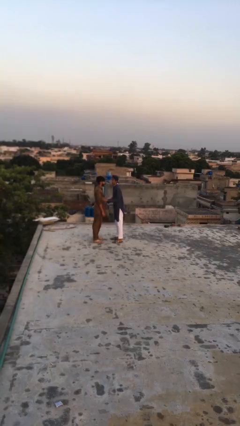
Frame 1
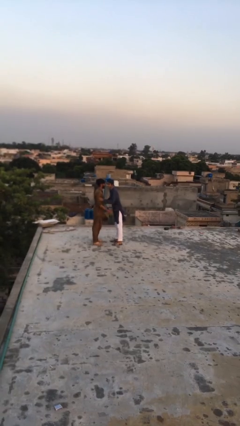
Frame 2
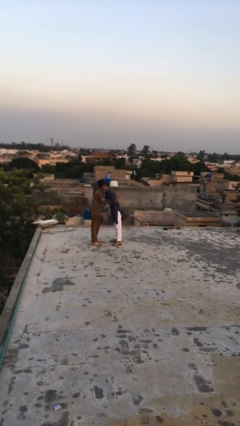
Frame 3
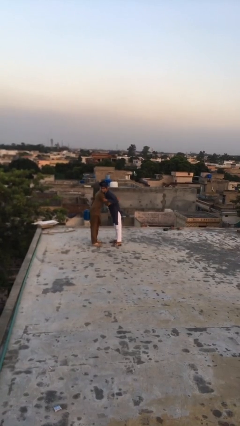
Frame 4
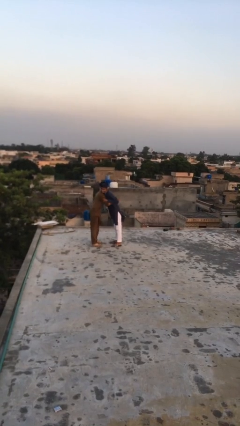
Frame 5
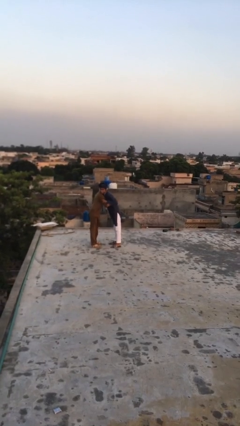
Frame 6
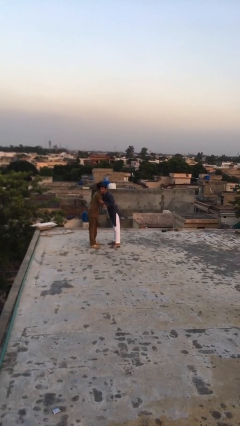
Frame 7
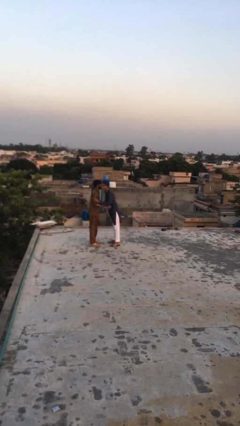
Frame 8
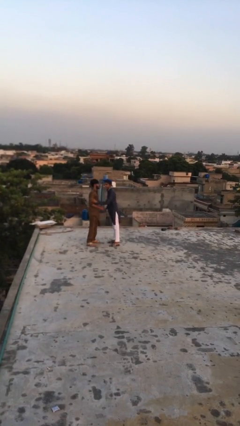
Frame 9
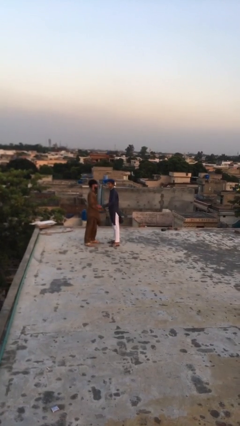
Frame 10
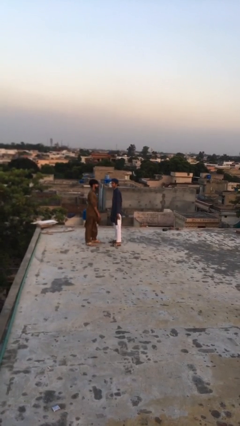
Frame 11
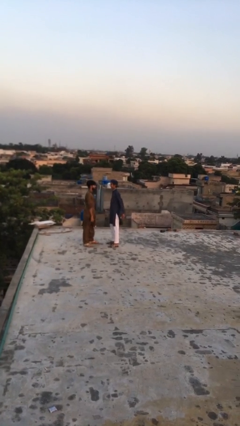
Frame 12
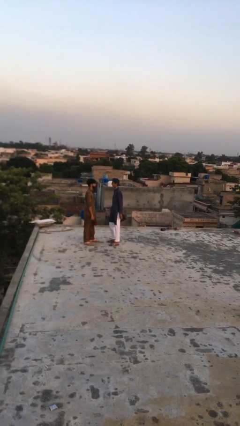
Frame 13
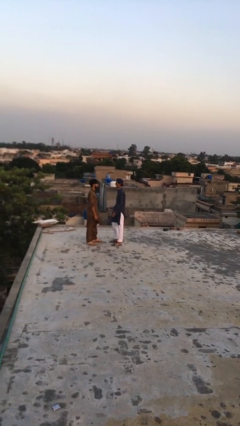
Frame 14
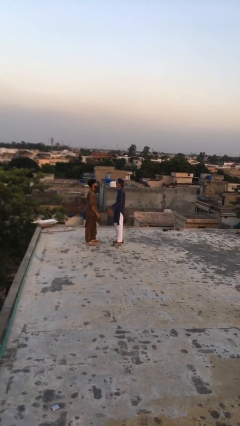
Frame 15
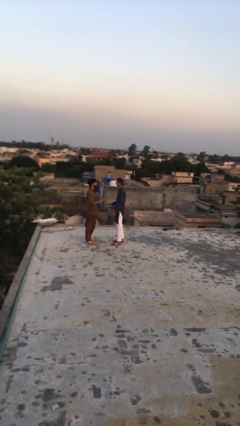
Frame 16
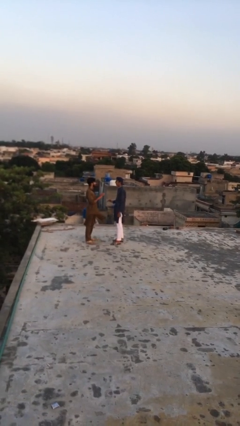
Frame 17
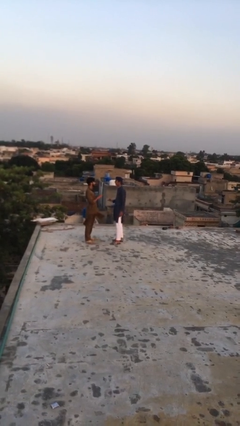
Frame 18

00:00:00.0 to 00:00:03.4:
person embraces person

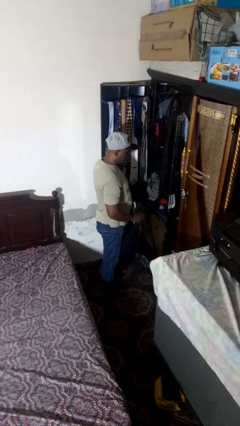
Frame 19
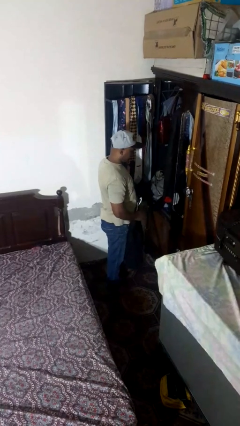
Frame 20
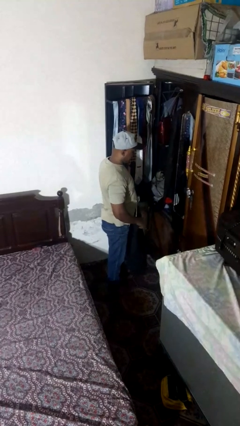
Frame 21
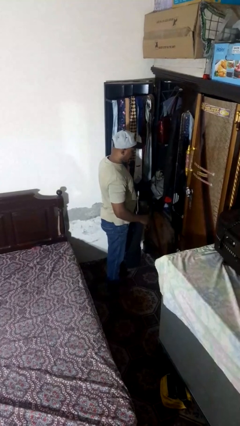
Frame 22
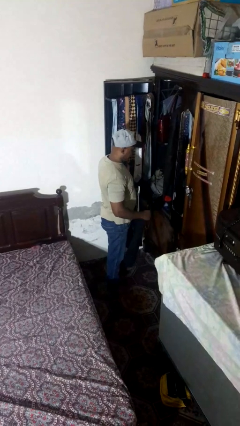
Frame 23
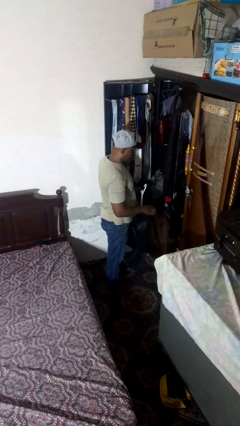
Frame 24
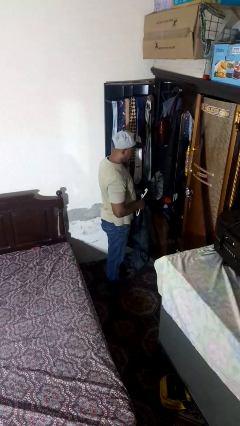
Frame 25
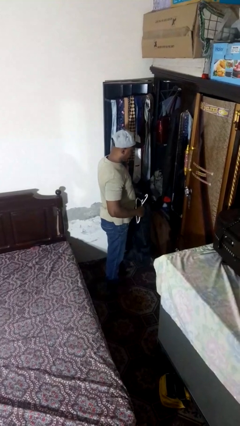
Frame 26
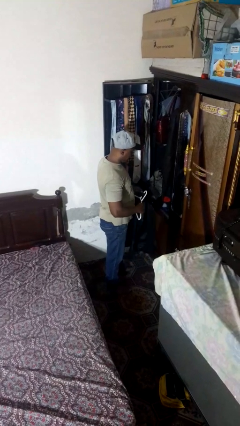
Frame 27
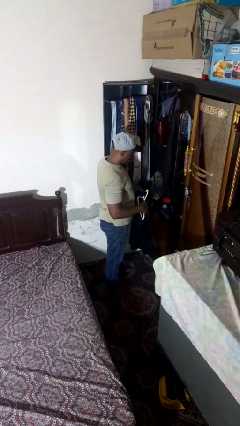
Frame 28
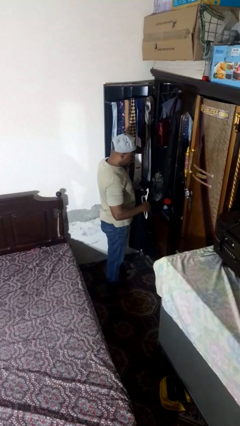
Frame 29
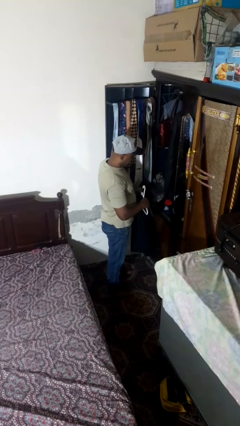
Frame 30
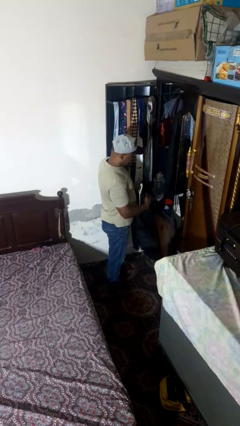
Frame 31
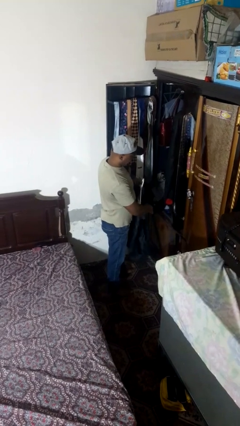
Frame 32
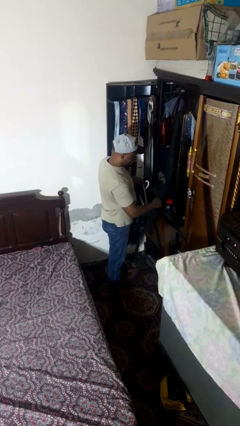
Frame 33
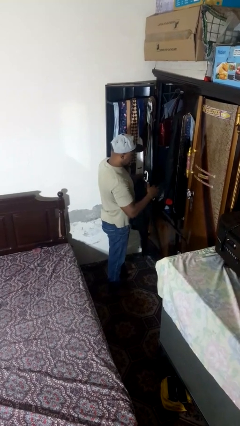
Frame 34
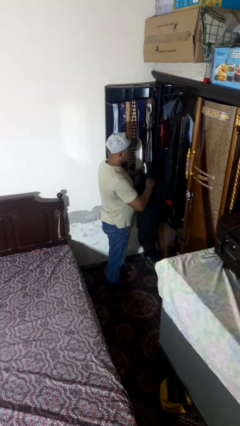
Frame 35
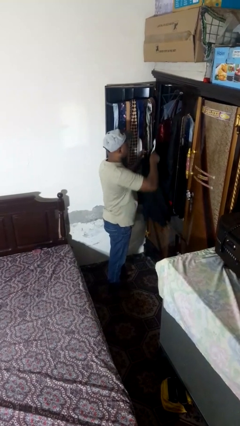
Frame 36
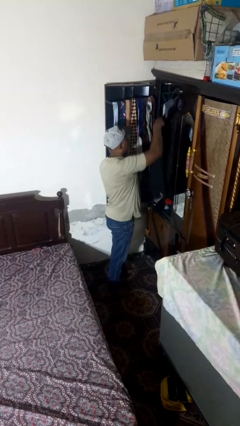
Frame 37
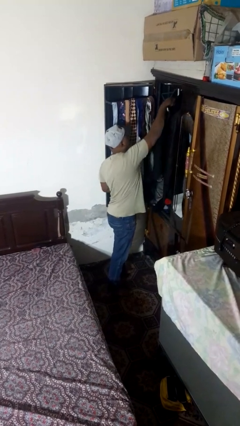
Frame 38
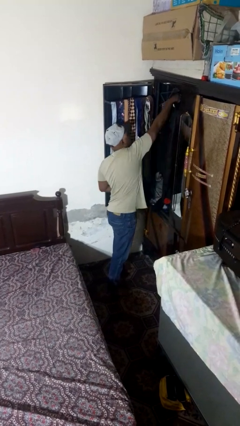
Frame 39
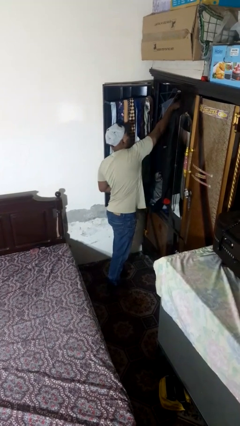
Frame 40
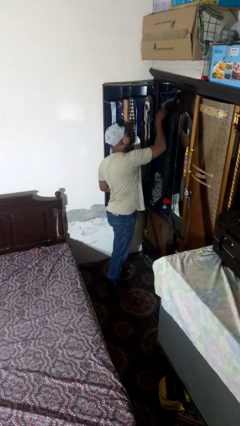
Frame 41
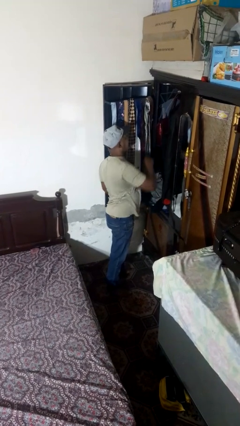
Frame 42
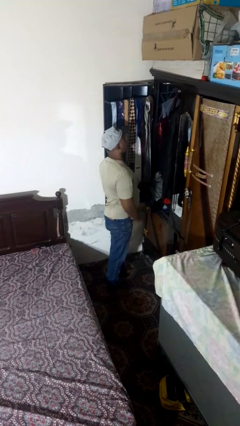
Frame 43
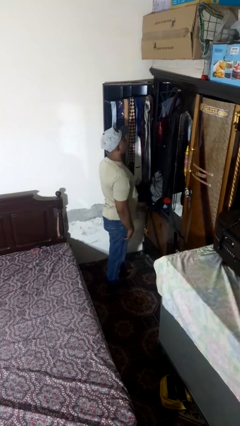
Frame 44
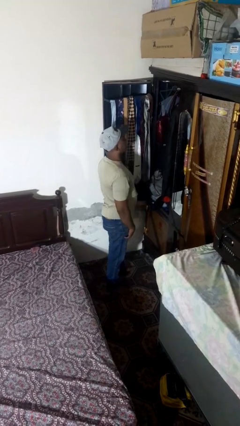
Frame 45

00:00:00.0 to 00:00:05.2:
person puts clothes into closet

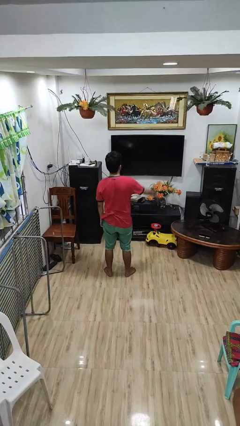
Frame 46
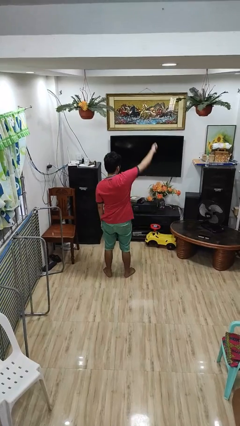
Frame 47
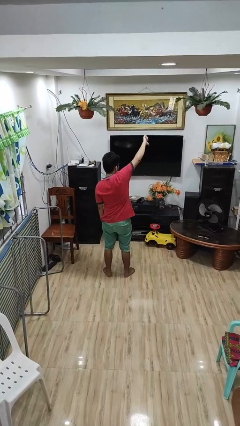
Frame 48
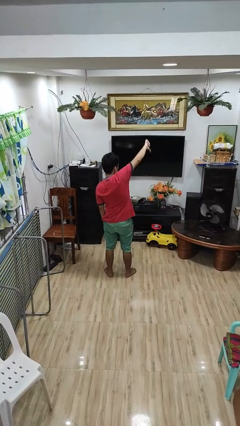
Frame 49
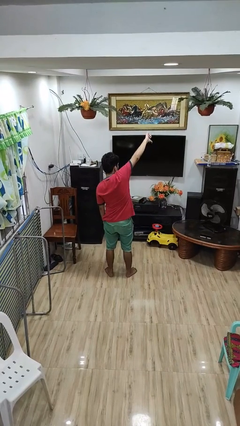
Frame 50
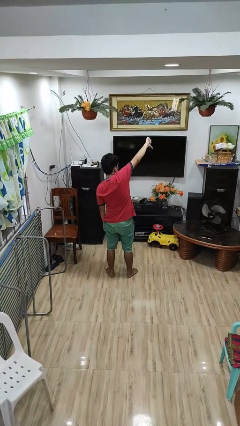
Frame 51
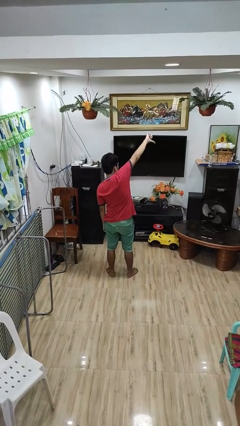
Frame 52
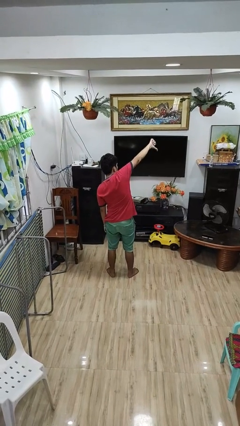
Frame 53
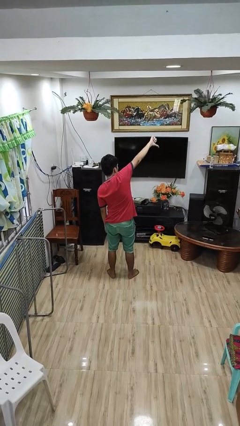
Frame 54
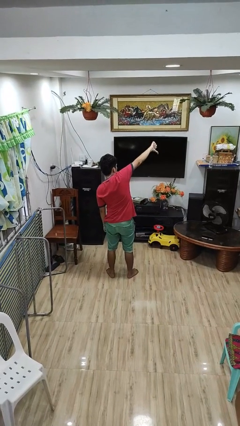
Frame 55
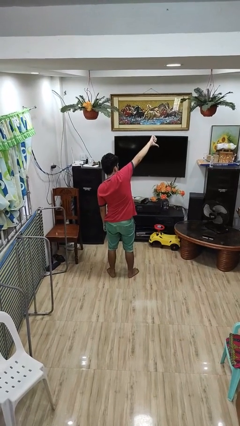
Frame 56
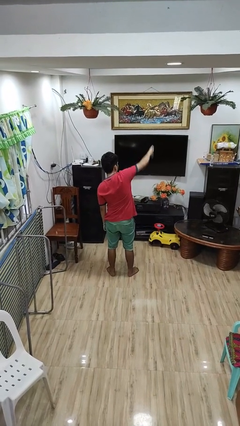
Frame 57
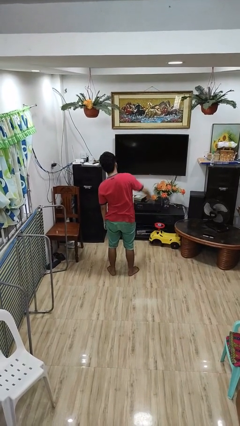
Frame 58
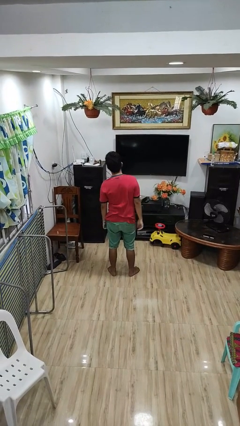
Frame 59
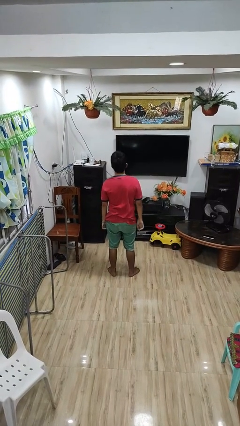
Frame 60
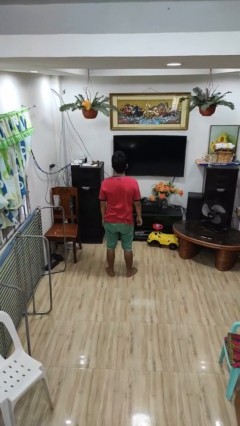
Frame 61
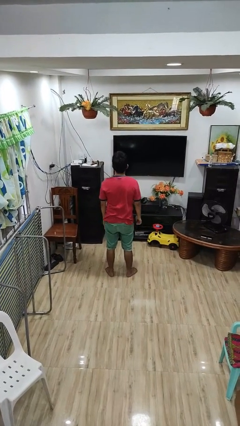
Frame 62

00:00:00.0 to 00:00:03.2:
person gestures thumbs down

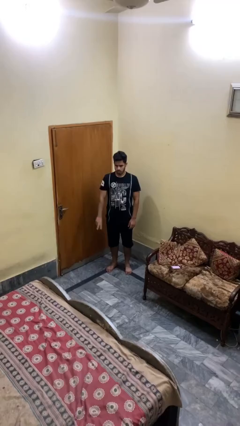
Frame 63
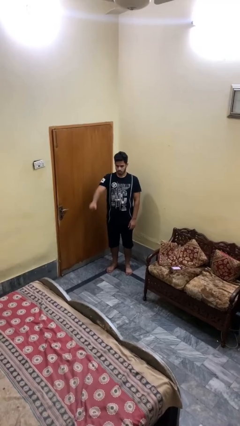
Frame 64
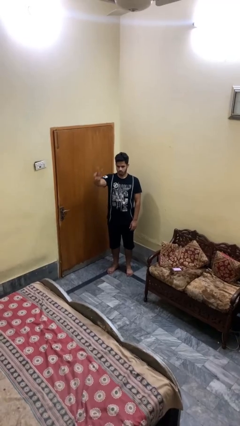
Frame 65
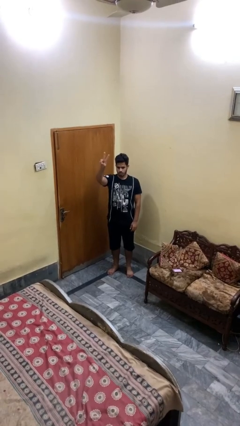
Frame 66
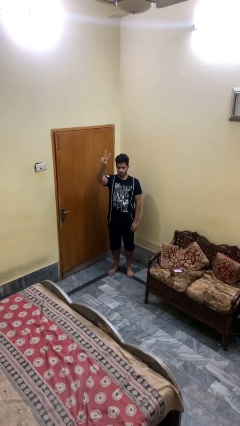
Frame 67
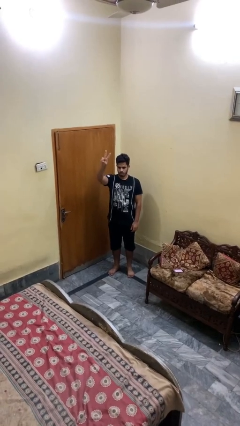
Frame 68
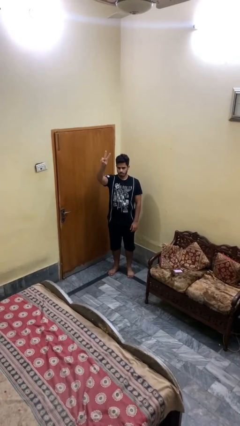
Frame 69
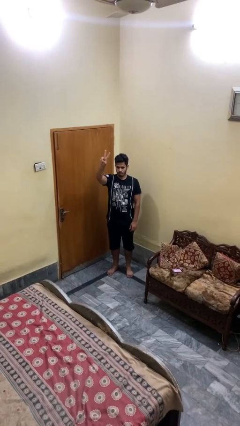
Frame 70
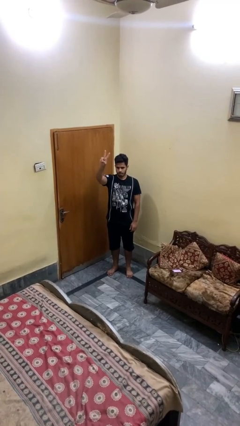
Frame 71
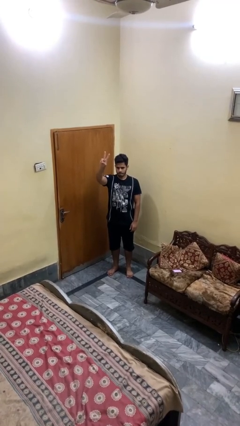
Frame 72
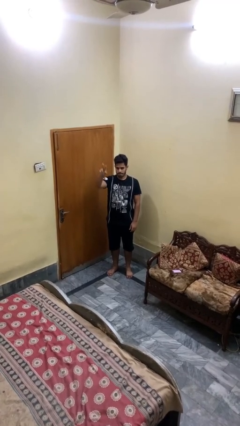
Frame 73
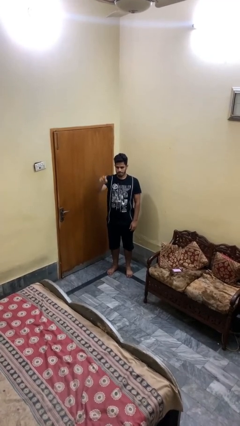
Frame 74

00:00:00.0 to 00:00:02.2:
person gestures peace

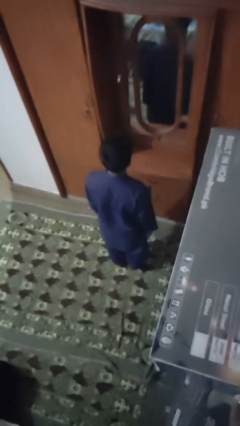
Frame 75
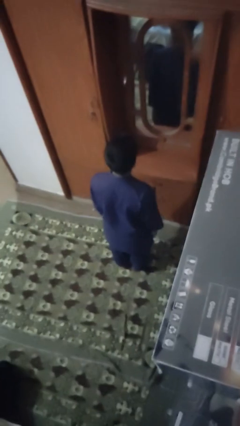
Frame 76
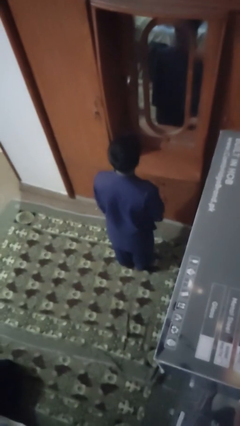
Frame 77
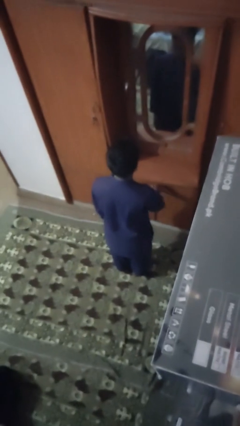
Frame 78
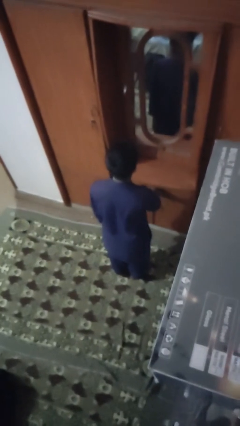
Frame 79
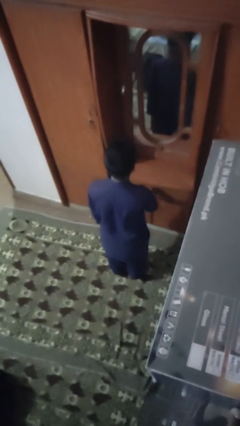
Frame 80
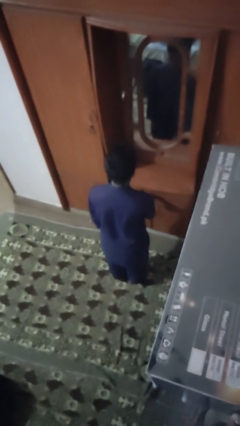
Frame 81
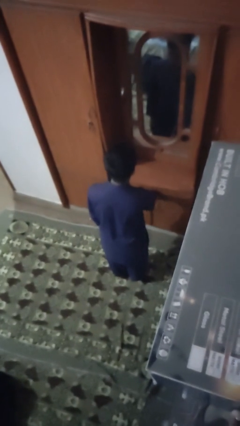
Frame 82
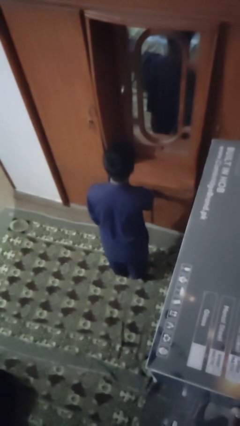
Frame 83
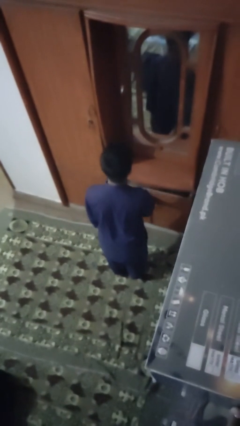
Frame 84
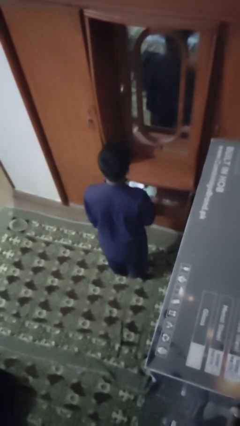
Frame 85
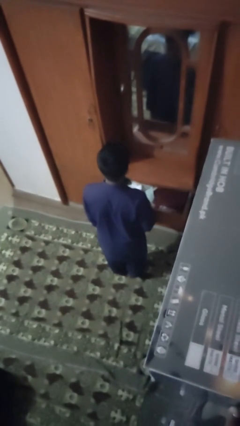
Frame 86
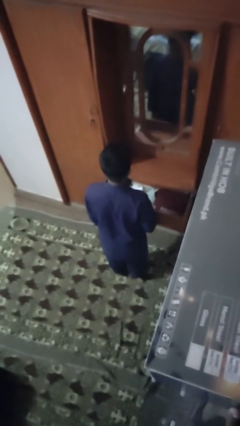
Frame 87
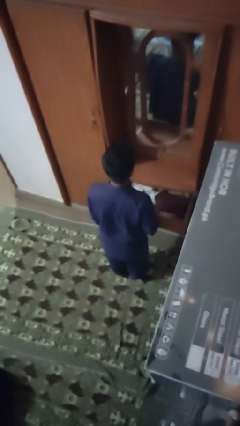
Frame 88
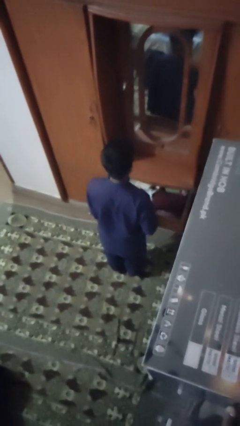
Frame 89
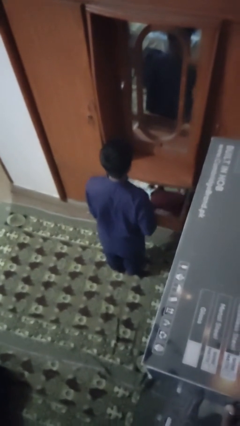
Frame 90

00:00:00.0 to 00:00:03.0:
person opens dresser drawer

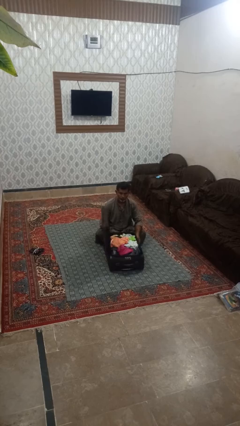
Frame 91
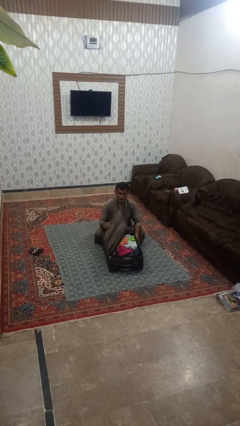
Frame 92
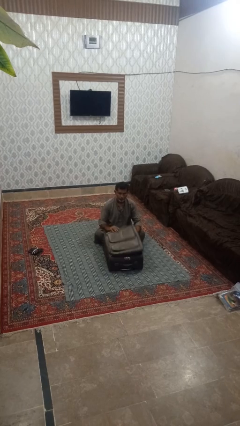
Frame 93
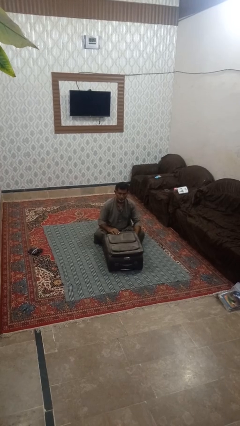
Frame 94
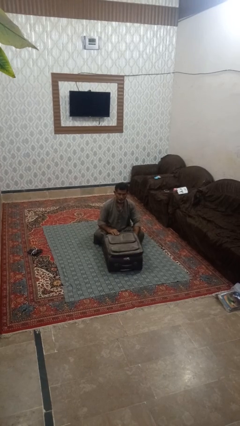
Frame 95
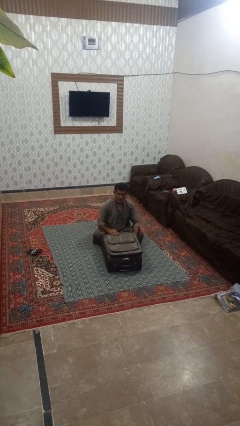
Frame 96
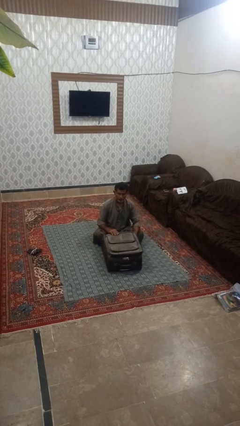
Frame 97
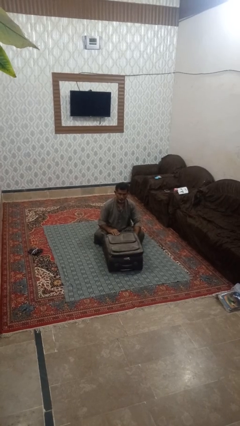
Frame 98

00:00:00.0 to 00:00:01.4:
person closes suitcase
